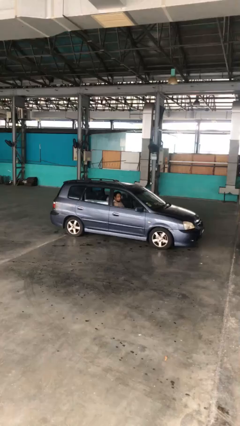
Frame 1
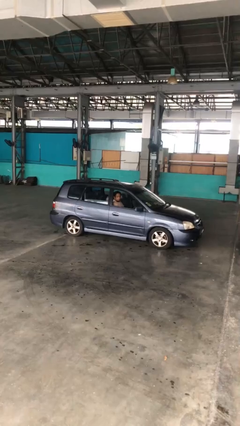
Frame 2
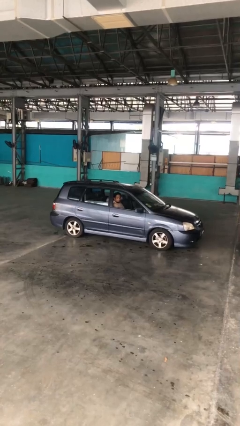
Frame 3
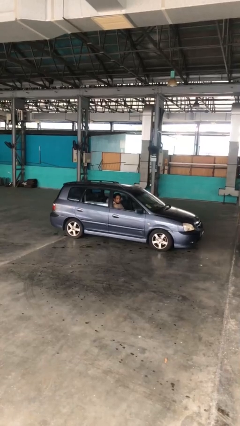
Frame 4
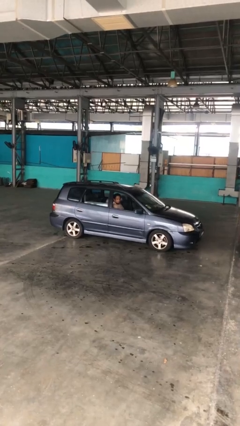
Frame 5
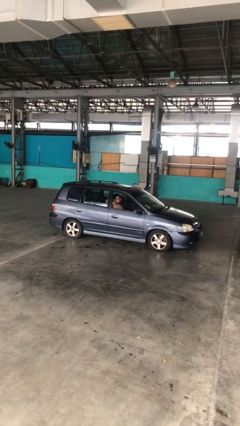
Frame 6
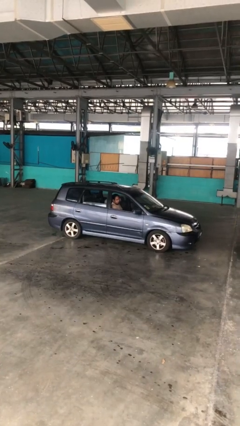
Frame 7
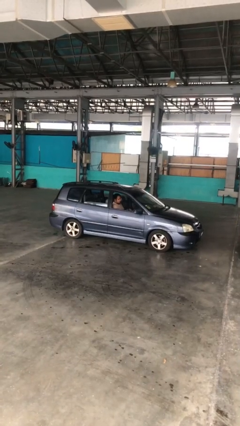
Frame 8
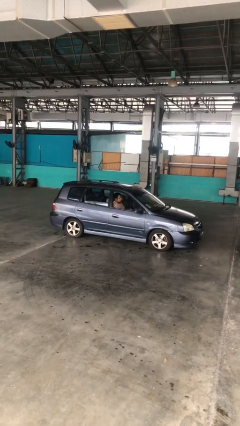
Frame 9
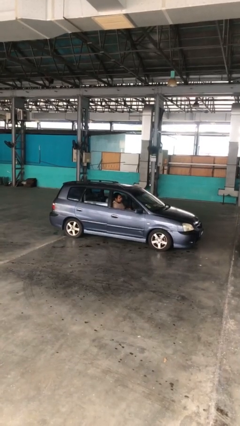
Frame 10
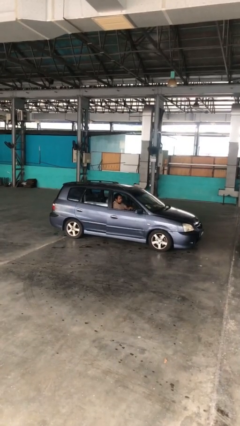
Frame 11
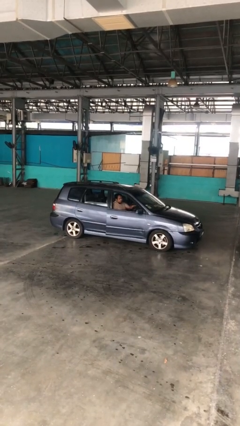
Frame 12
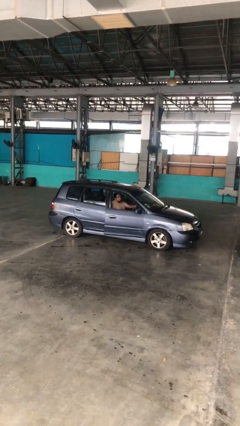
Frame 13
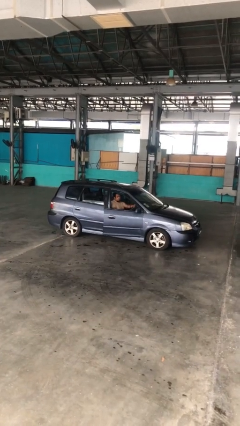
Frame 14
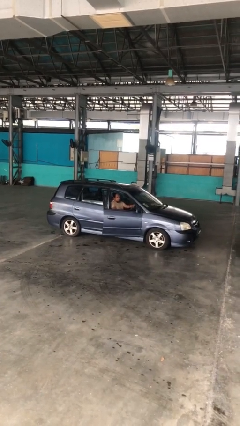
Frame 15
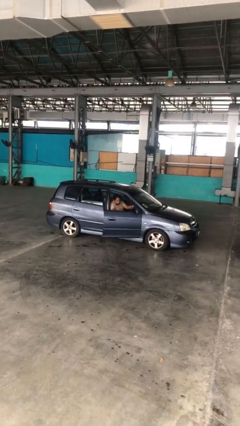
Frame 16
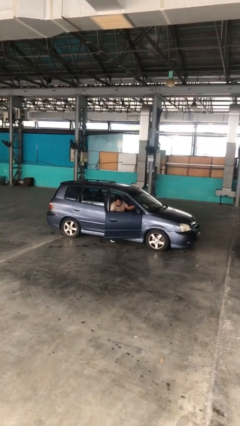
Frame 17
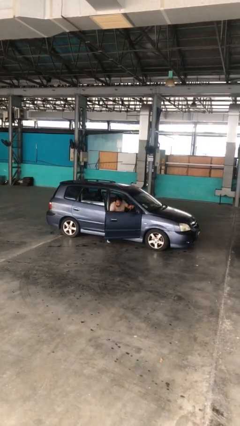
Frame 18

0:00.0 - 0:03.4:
person opens car door

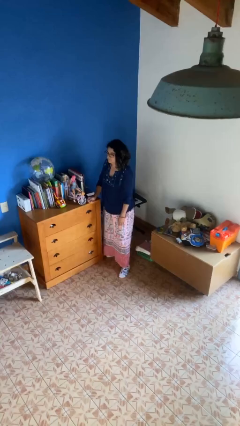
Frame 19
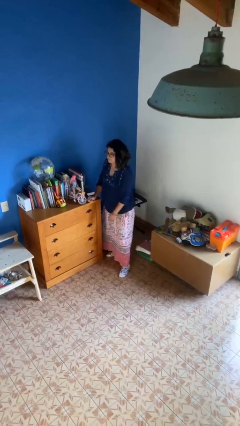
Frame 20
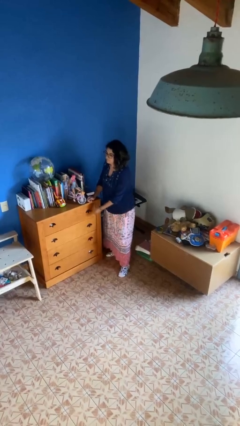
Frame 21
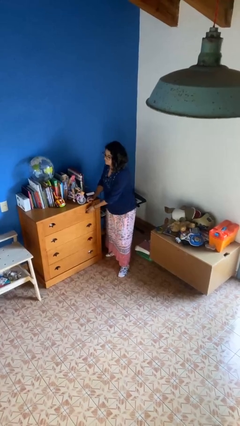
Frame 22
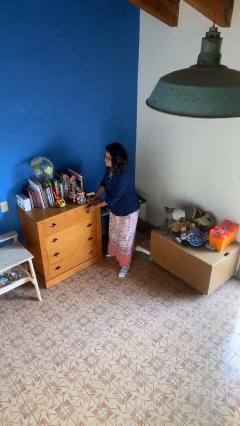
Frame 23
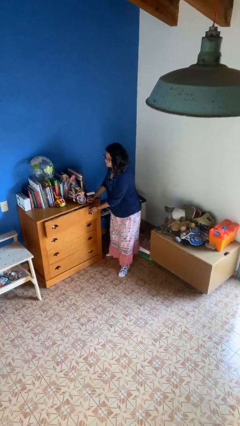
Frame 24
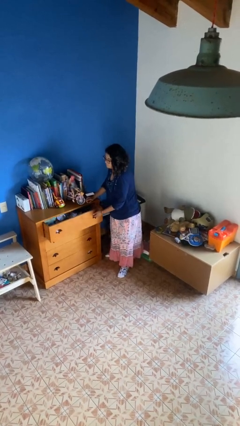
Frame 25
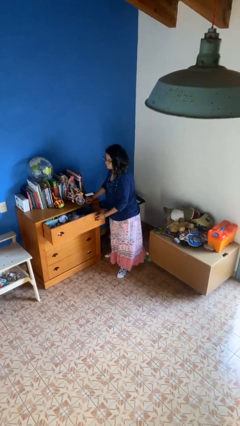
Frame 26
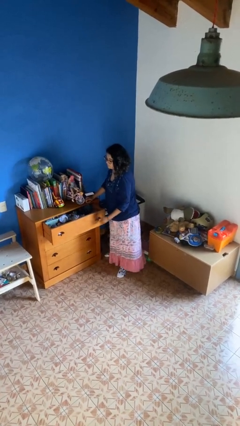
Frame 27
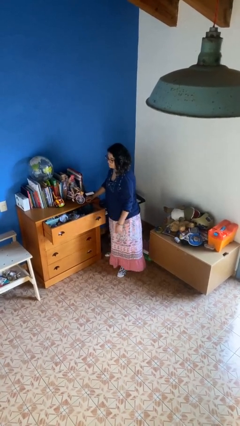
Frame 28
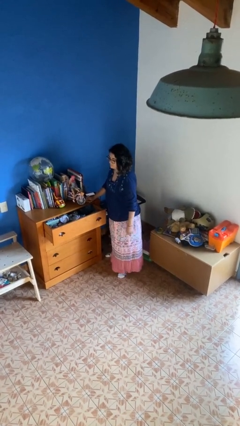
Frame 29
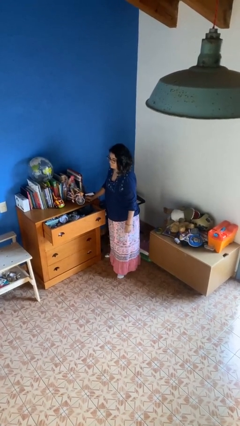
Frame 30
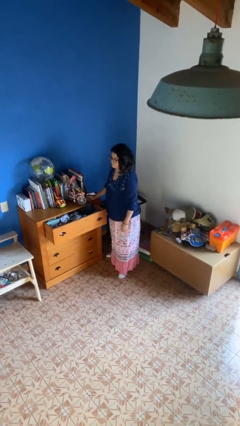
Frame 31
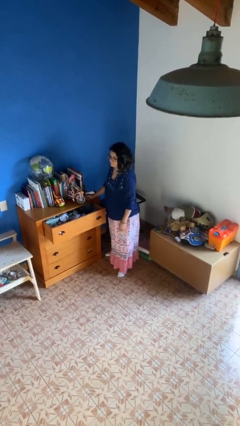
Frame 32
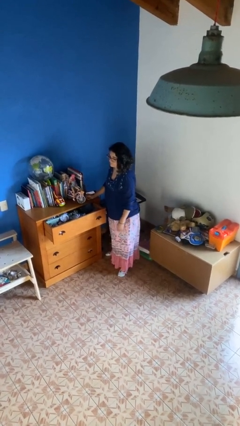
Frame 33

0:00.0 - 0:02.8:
person opens dresser drawer

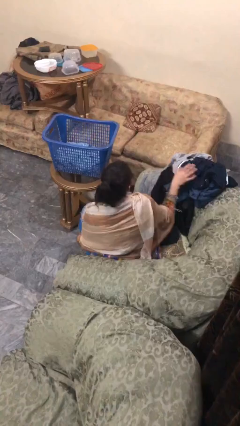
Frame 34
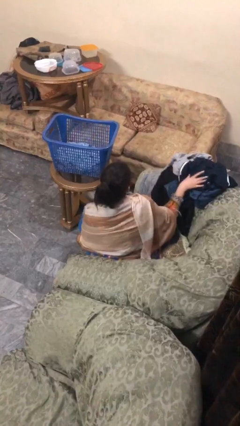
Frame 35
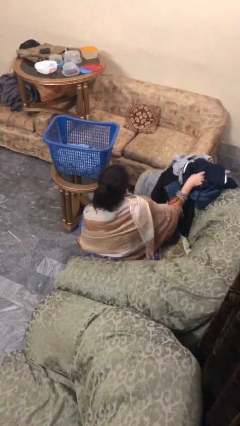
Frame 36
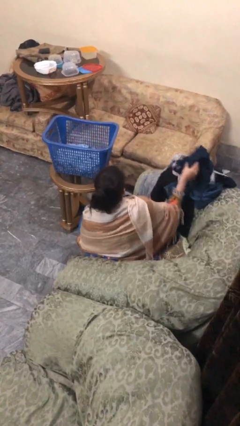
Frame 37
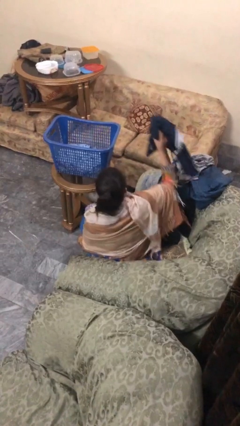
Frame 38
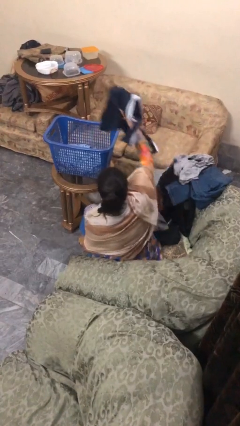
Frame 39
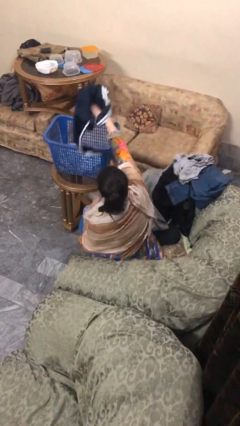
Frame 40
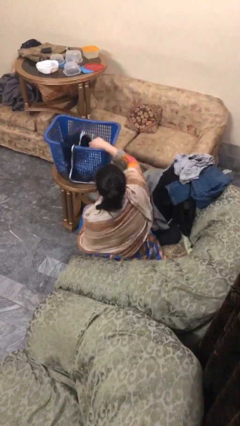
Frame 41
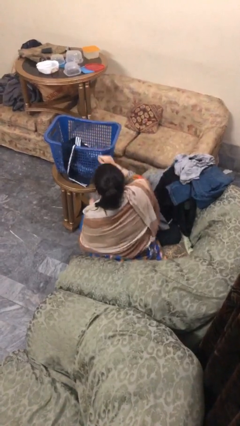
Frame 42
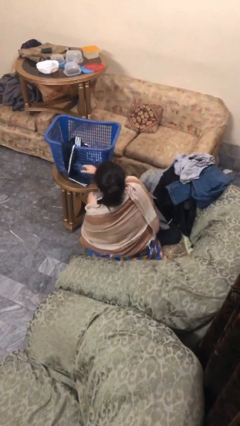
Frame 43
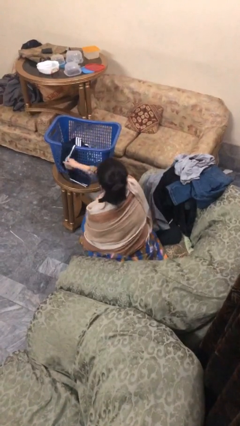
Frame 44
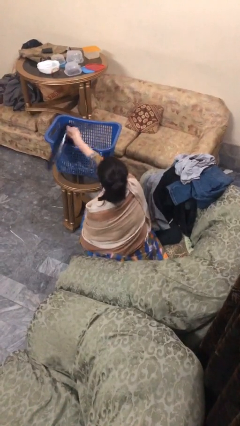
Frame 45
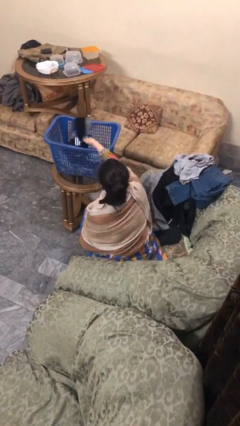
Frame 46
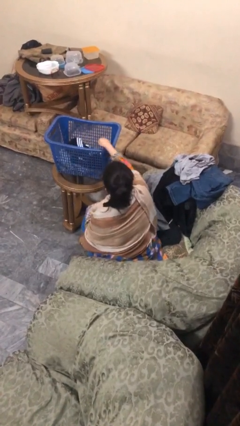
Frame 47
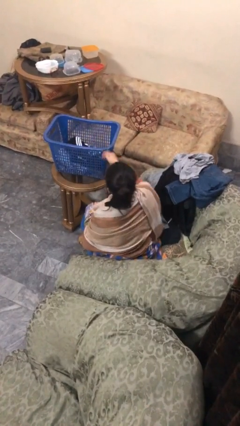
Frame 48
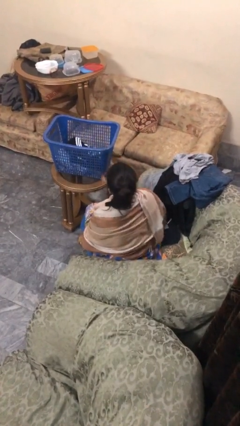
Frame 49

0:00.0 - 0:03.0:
person puts object into basket

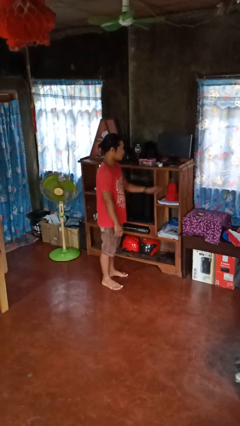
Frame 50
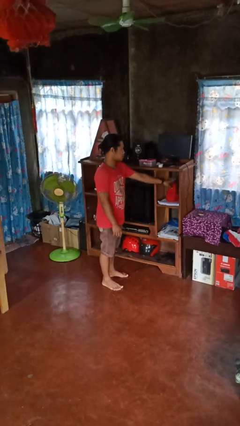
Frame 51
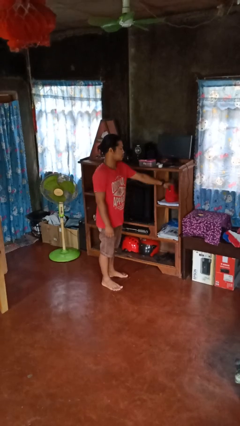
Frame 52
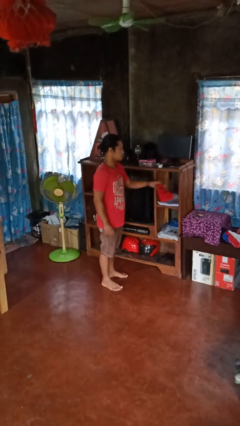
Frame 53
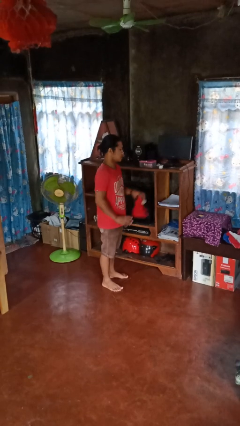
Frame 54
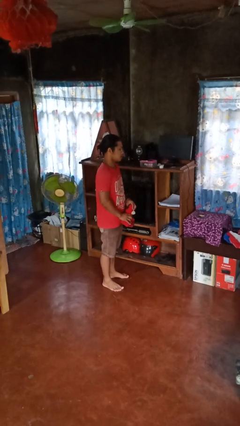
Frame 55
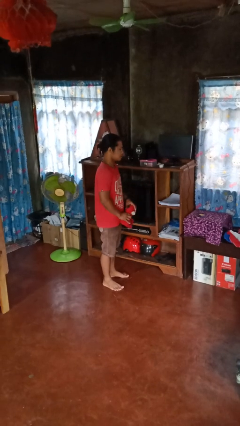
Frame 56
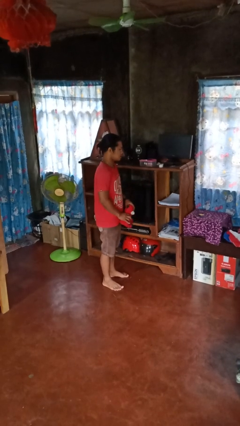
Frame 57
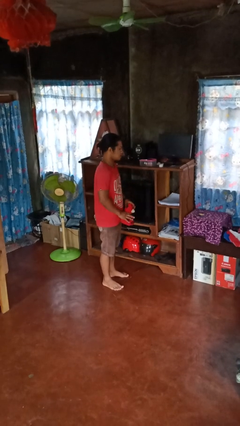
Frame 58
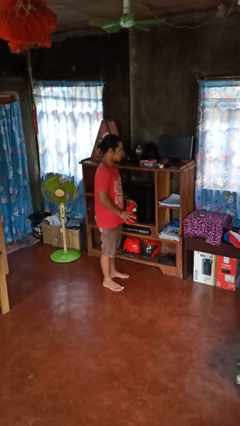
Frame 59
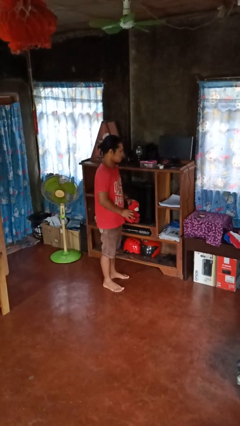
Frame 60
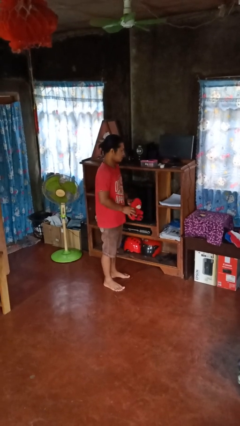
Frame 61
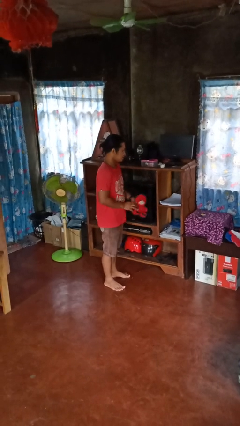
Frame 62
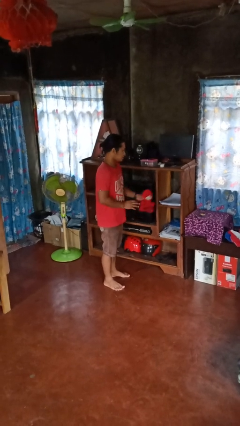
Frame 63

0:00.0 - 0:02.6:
person picks up object from shelf

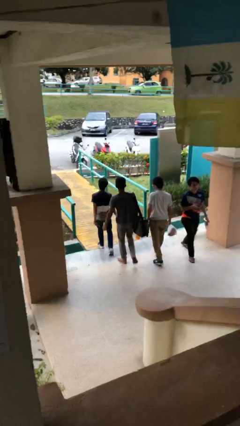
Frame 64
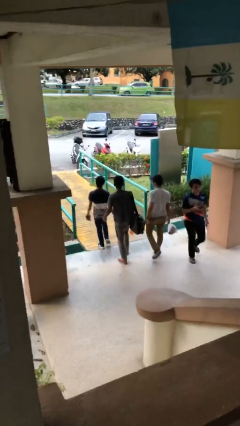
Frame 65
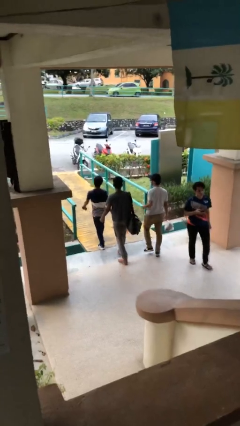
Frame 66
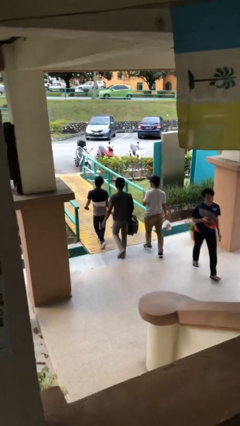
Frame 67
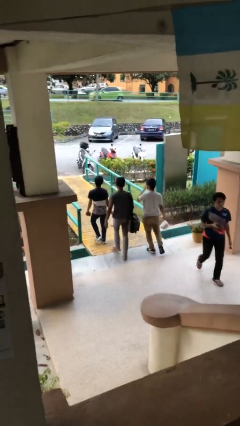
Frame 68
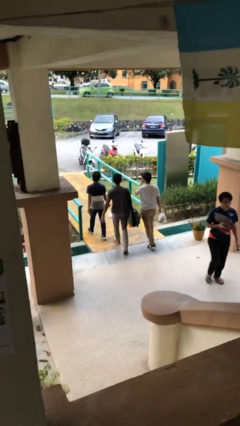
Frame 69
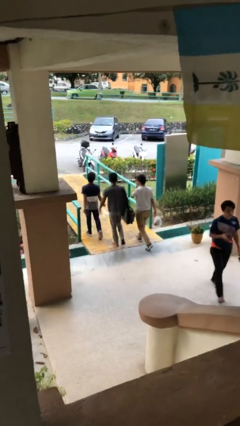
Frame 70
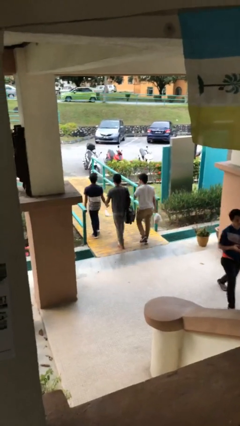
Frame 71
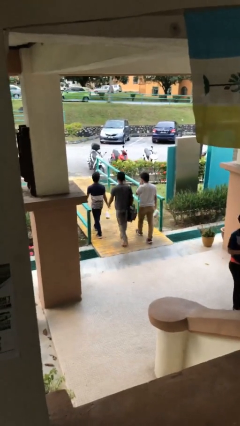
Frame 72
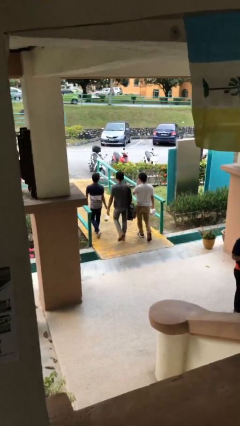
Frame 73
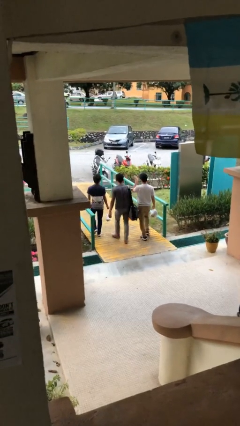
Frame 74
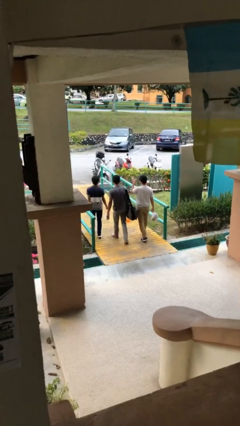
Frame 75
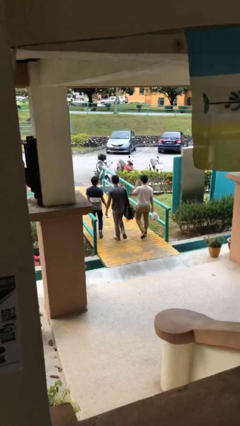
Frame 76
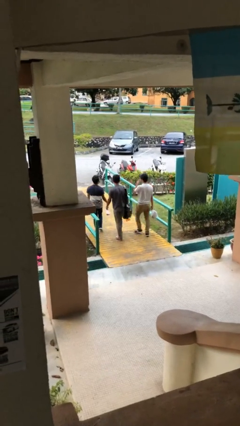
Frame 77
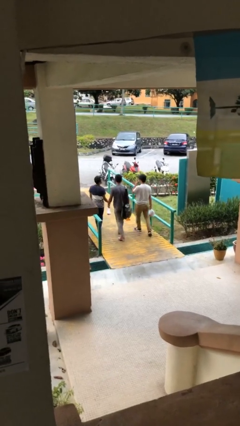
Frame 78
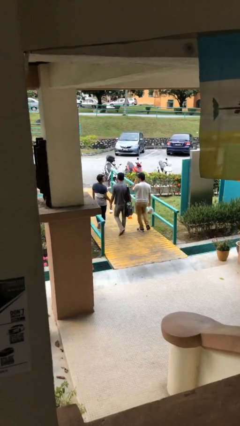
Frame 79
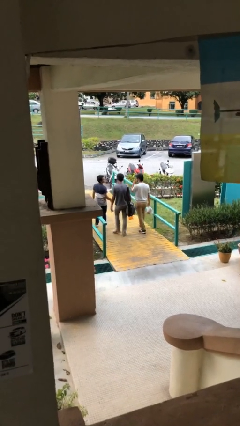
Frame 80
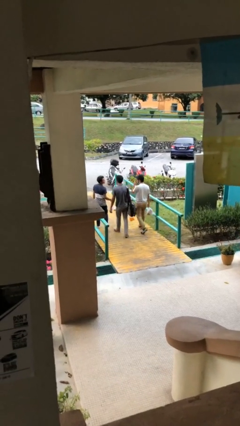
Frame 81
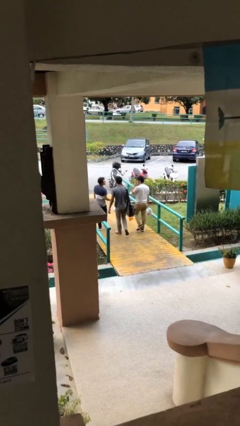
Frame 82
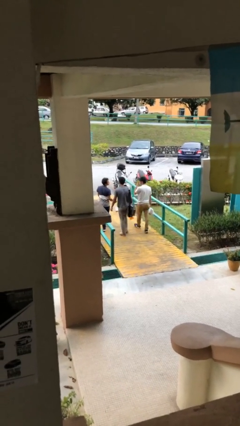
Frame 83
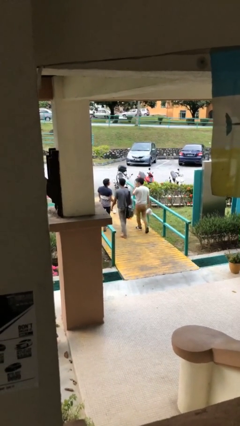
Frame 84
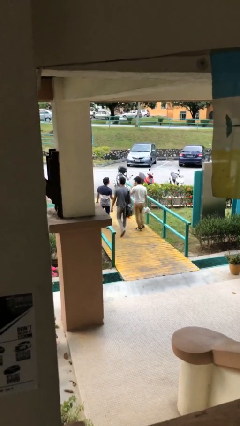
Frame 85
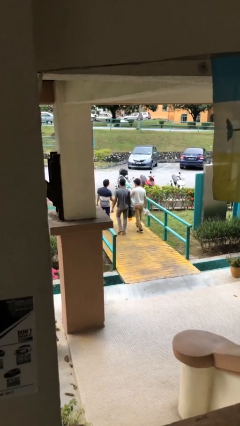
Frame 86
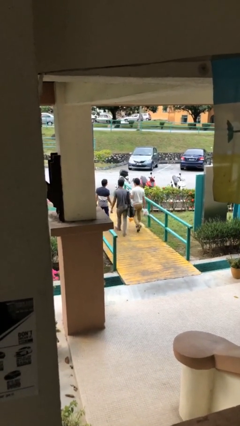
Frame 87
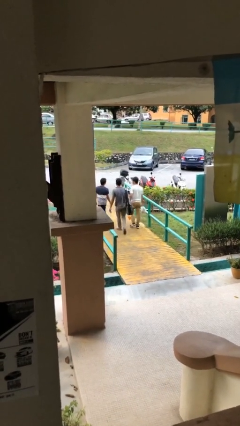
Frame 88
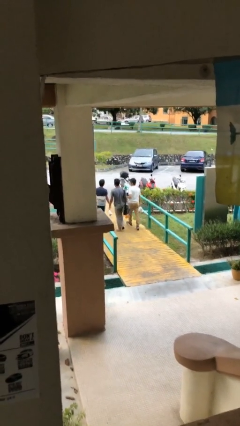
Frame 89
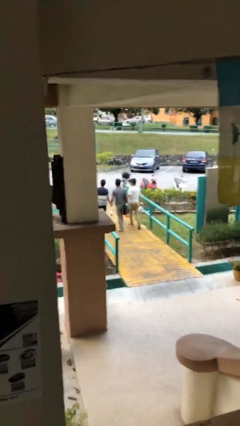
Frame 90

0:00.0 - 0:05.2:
person talks to person

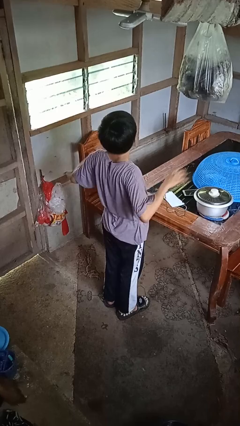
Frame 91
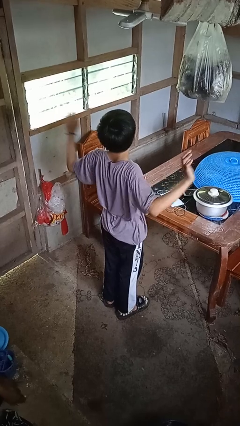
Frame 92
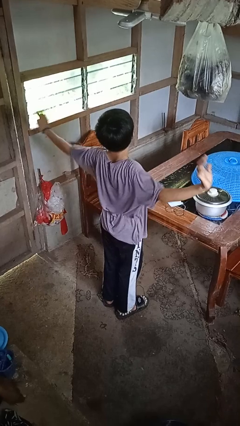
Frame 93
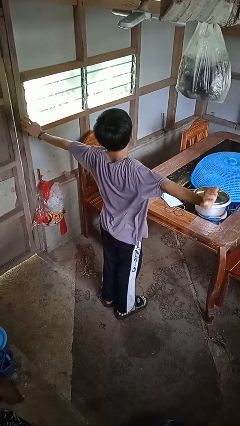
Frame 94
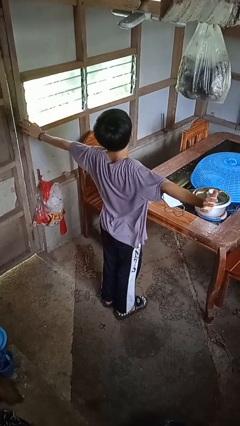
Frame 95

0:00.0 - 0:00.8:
person stretches arms to side
